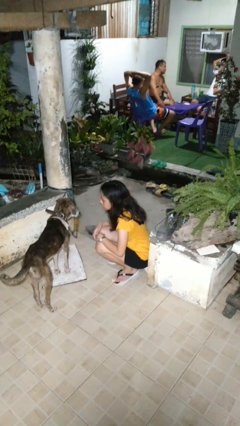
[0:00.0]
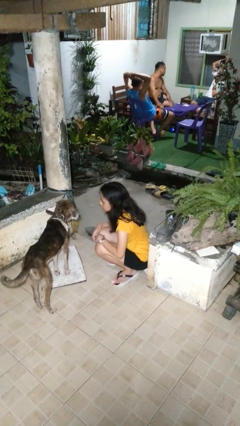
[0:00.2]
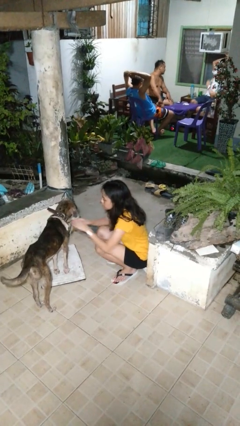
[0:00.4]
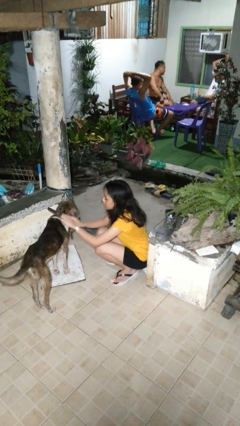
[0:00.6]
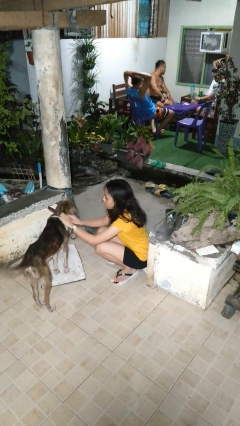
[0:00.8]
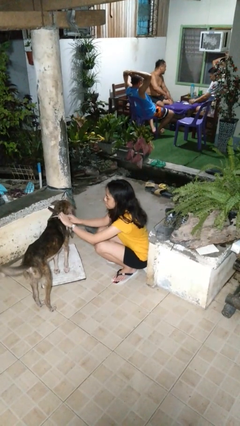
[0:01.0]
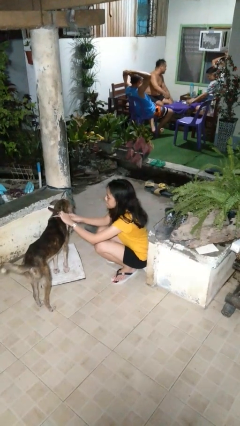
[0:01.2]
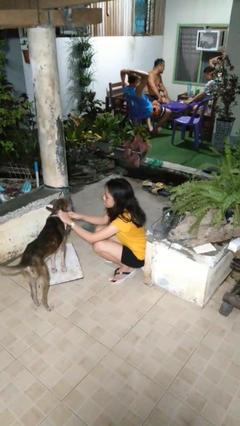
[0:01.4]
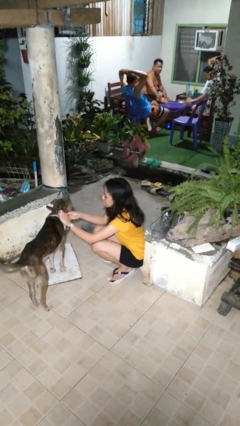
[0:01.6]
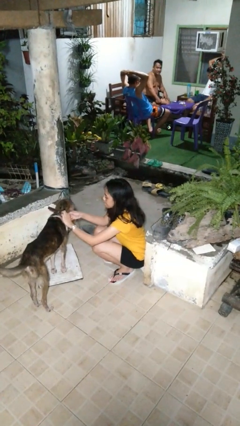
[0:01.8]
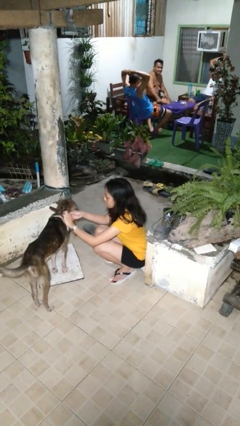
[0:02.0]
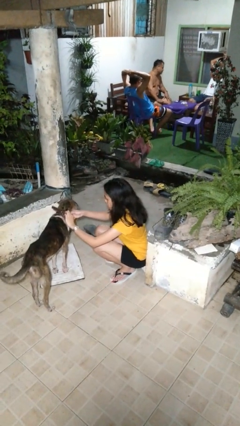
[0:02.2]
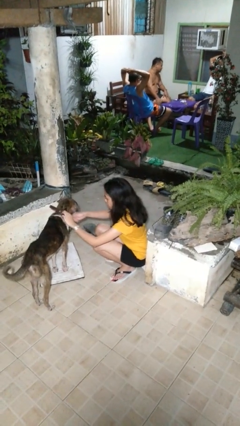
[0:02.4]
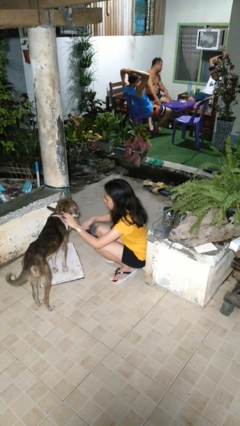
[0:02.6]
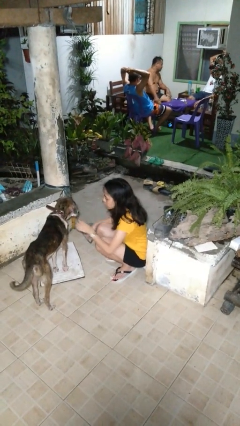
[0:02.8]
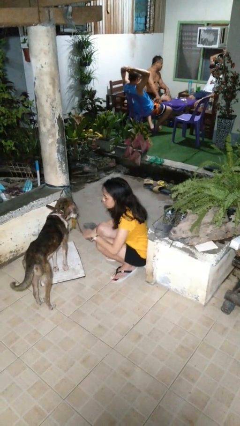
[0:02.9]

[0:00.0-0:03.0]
person unattaches leash from dog

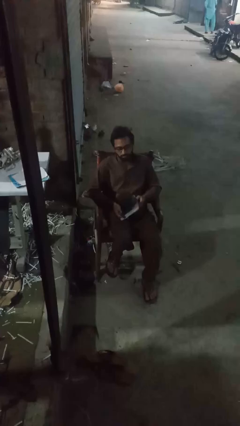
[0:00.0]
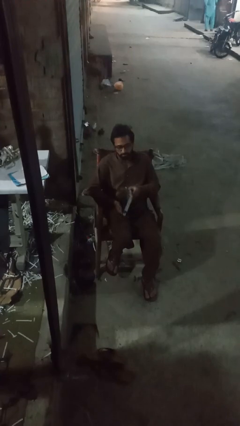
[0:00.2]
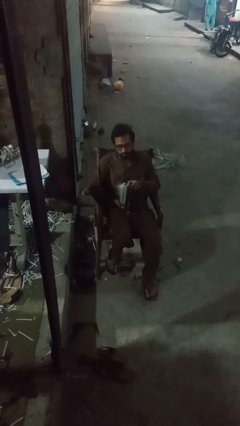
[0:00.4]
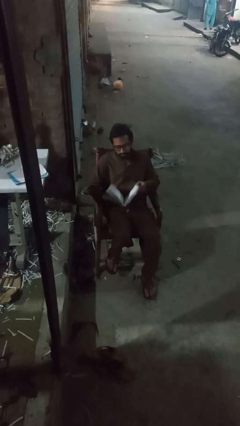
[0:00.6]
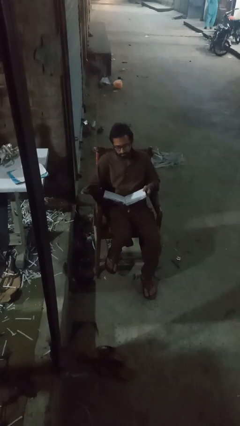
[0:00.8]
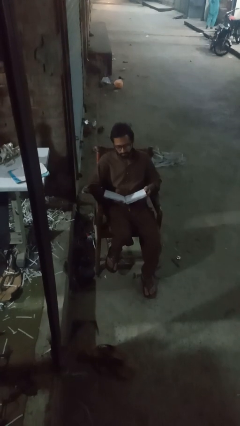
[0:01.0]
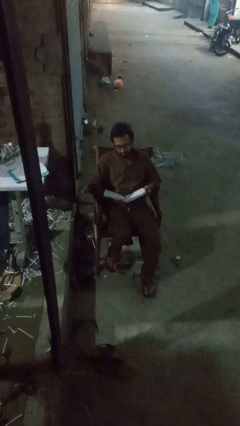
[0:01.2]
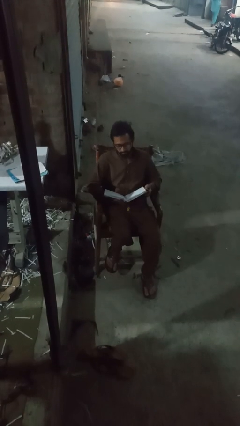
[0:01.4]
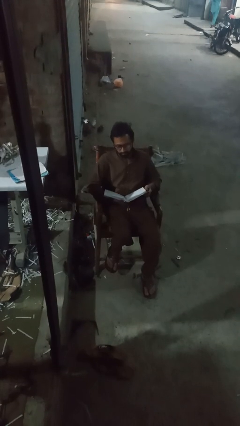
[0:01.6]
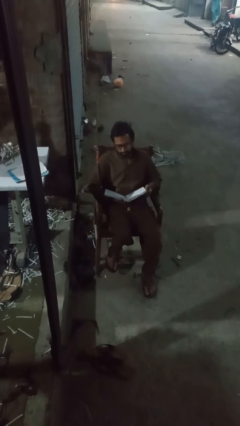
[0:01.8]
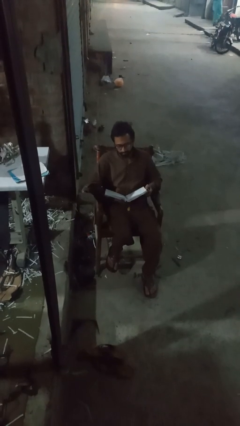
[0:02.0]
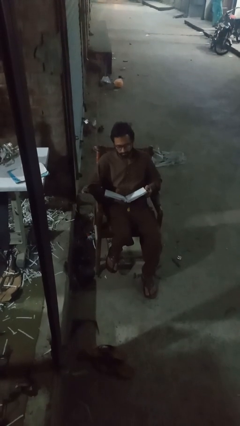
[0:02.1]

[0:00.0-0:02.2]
person reads book

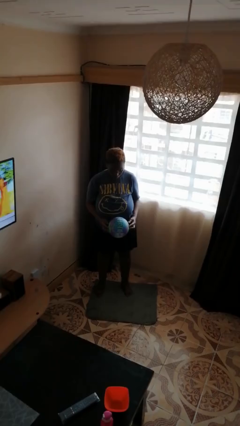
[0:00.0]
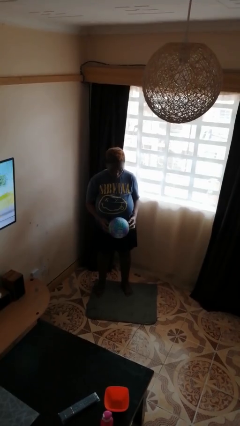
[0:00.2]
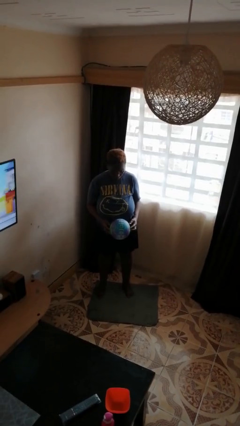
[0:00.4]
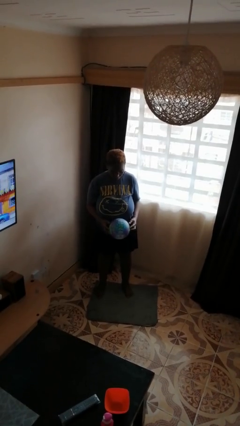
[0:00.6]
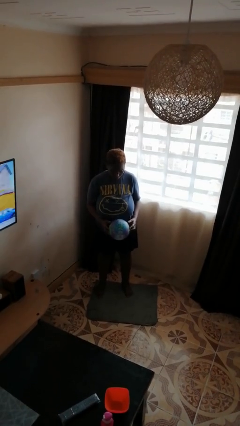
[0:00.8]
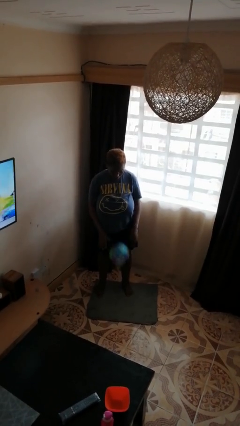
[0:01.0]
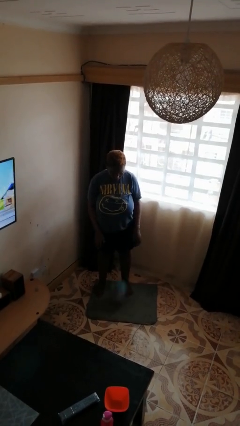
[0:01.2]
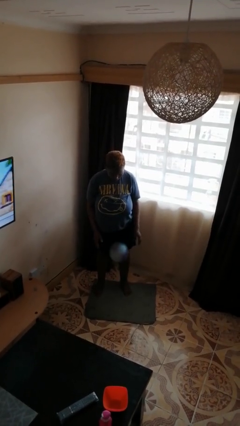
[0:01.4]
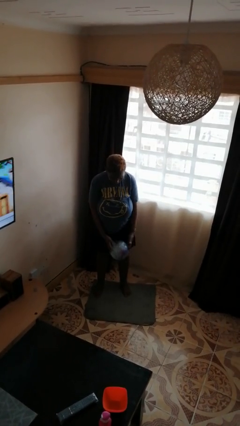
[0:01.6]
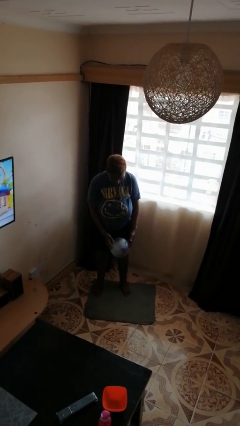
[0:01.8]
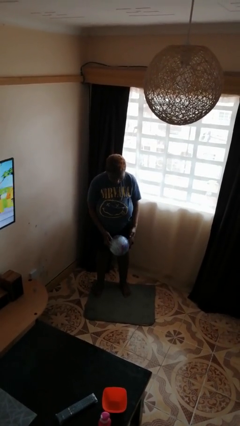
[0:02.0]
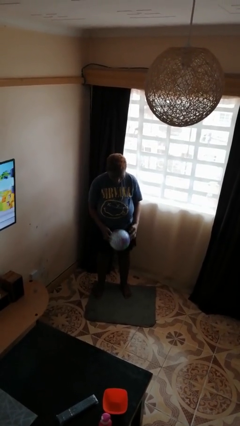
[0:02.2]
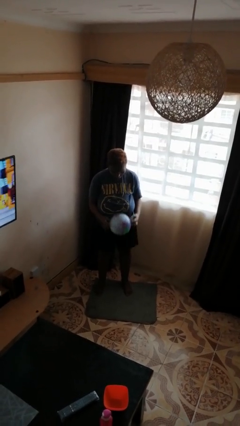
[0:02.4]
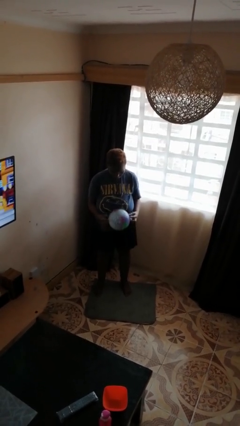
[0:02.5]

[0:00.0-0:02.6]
person bounces ball on floor

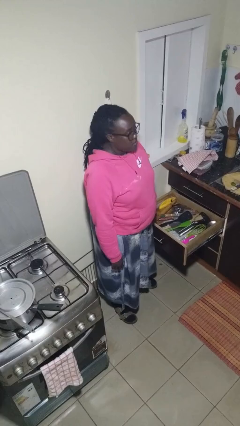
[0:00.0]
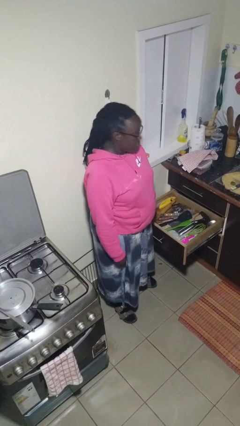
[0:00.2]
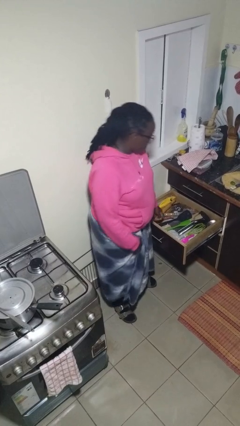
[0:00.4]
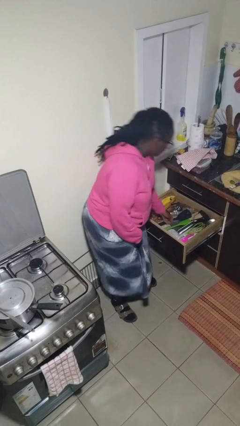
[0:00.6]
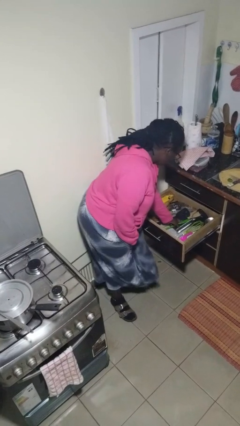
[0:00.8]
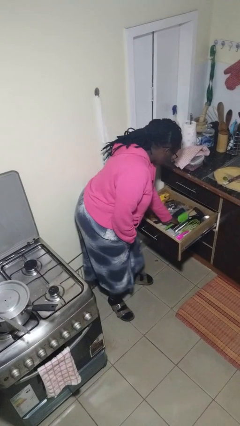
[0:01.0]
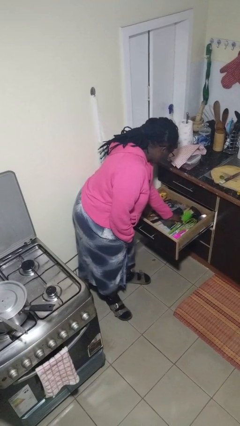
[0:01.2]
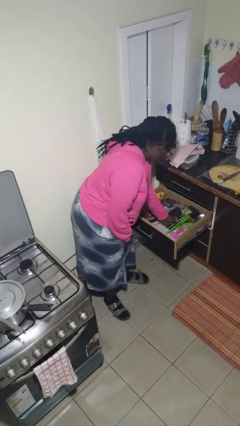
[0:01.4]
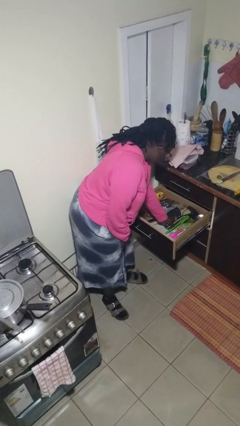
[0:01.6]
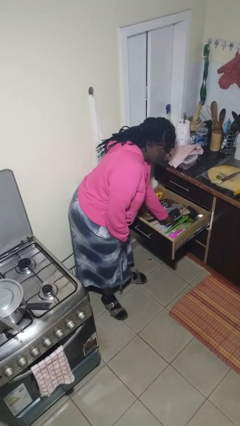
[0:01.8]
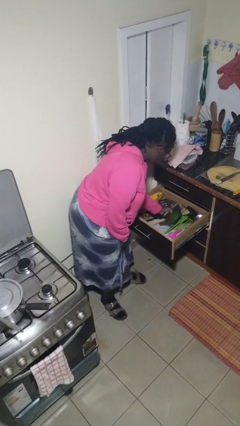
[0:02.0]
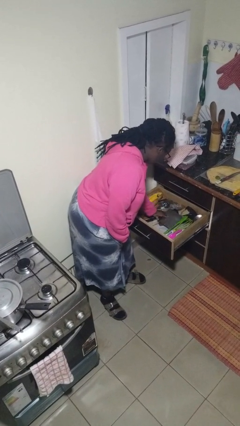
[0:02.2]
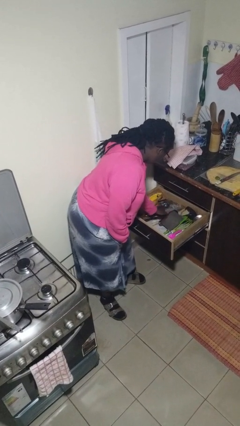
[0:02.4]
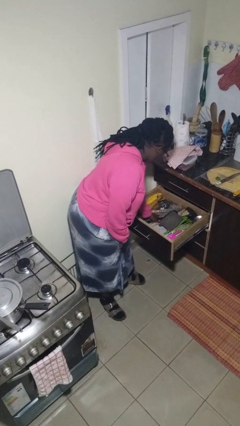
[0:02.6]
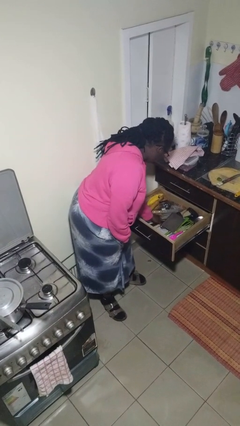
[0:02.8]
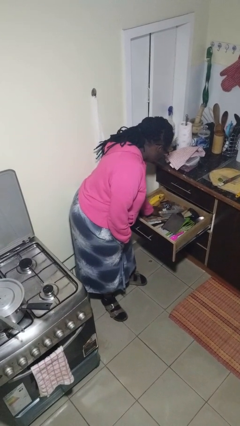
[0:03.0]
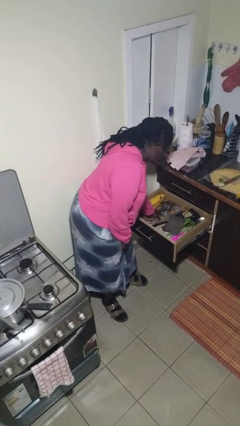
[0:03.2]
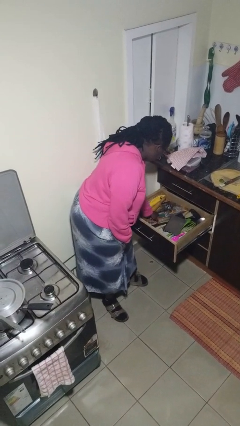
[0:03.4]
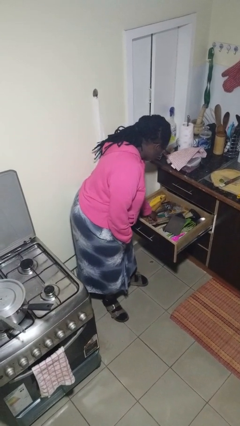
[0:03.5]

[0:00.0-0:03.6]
person searches in kitchen drawer

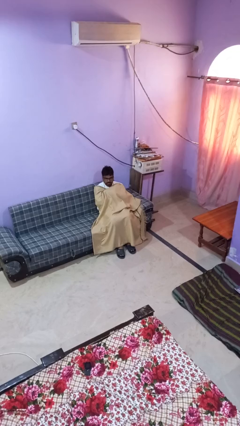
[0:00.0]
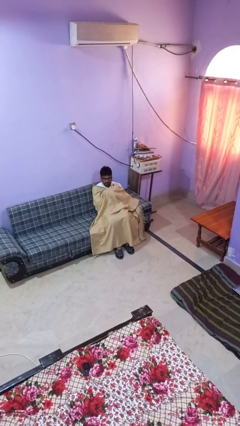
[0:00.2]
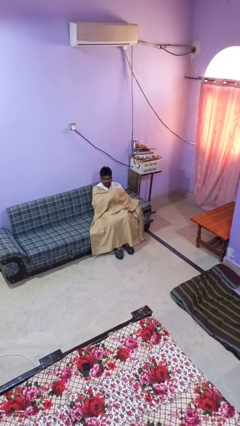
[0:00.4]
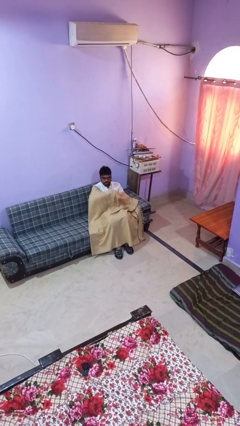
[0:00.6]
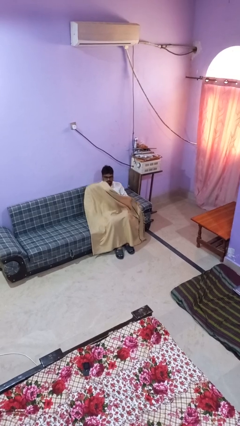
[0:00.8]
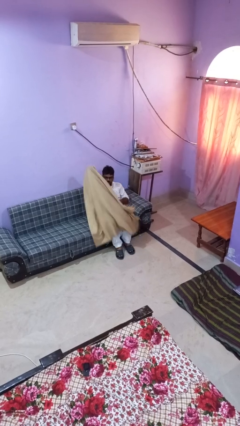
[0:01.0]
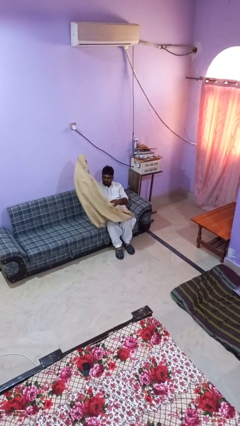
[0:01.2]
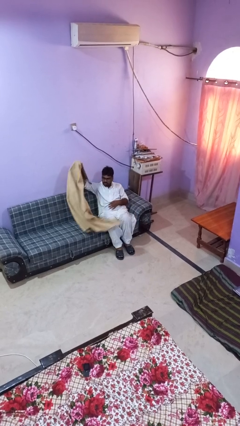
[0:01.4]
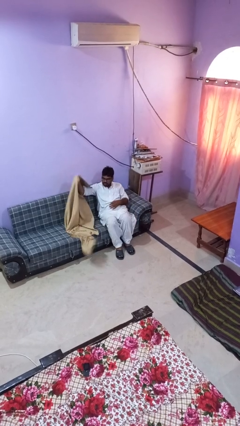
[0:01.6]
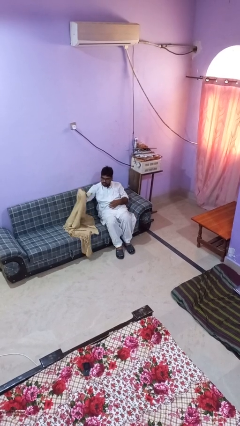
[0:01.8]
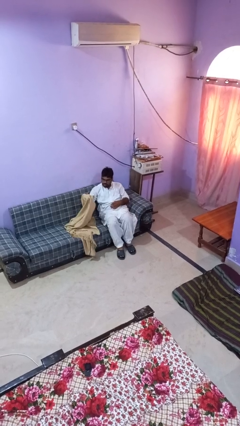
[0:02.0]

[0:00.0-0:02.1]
person uncovers with blanket

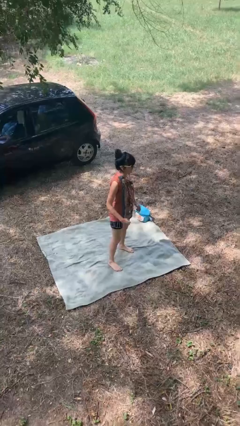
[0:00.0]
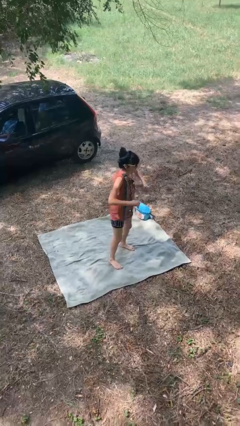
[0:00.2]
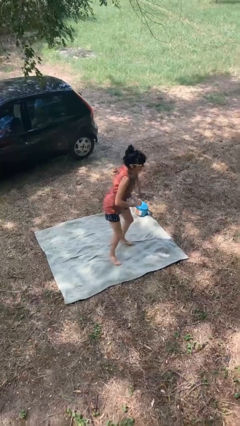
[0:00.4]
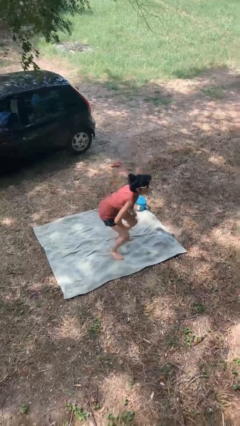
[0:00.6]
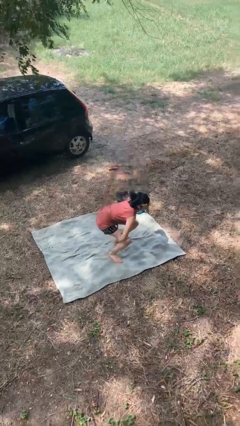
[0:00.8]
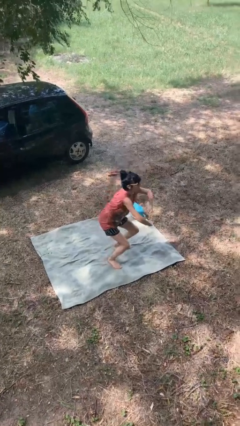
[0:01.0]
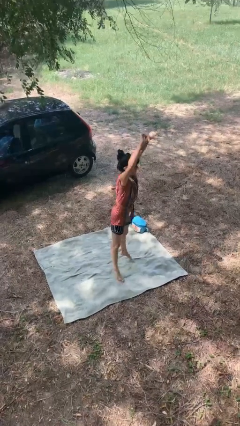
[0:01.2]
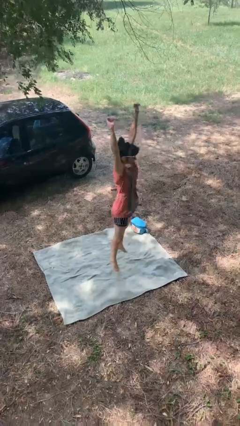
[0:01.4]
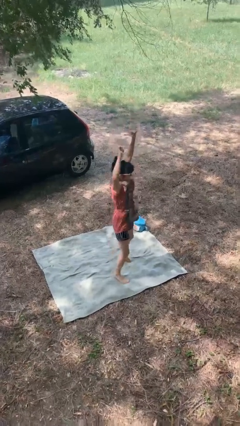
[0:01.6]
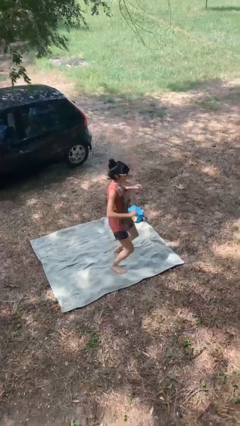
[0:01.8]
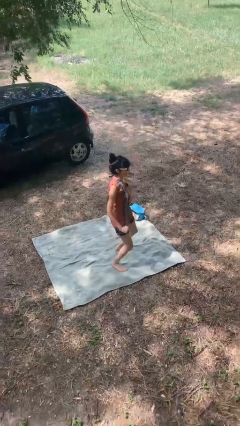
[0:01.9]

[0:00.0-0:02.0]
person jumps

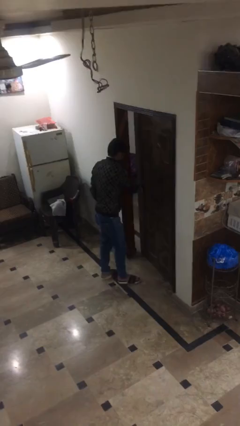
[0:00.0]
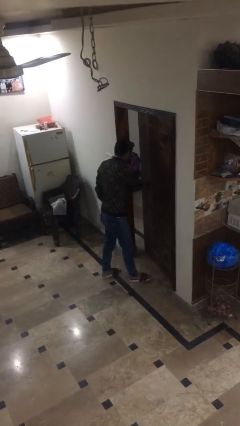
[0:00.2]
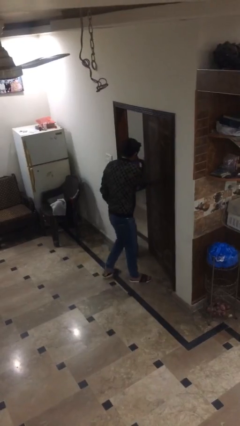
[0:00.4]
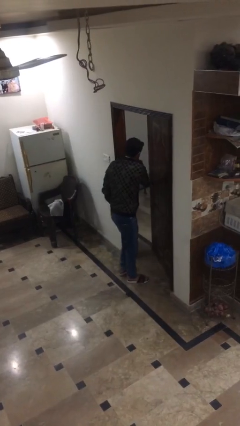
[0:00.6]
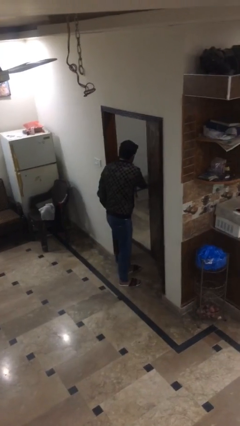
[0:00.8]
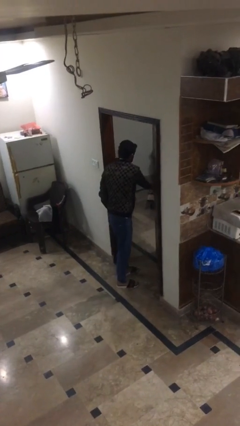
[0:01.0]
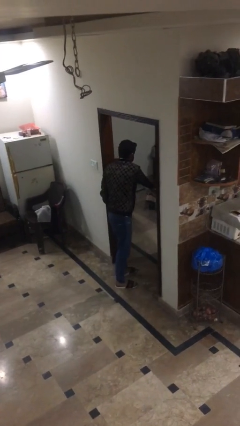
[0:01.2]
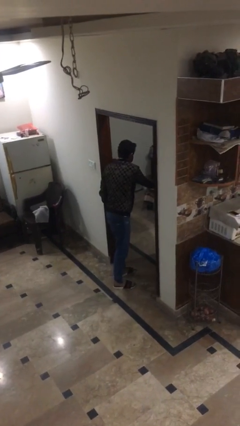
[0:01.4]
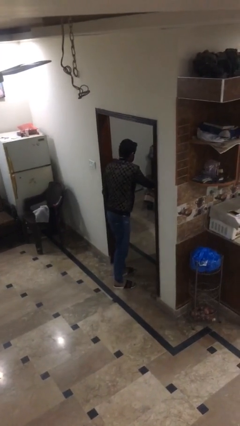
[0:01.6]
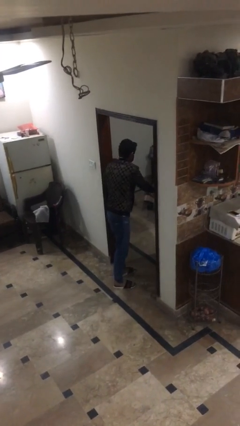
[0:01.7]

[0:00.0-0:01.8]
person opens facility door
